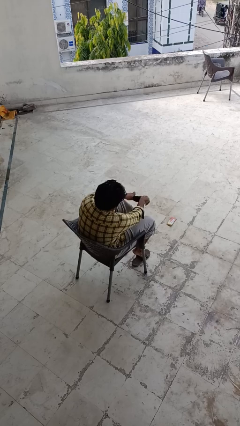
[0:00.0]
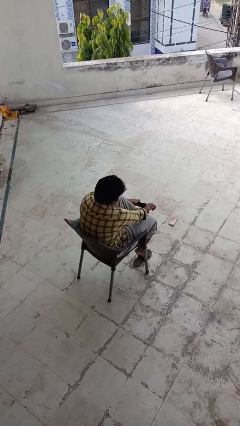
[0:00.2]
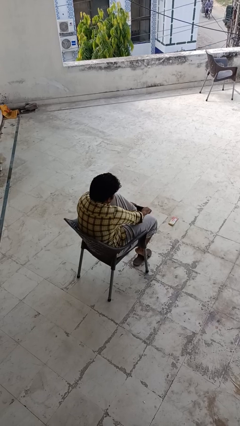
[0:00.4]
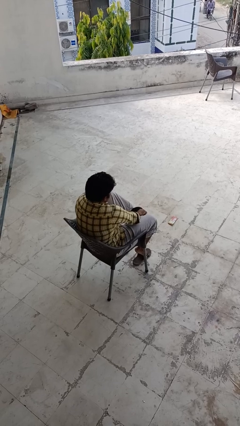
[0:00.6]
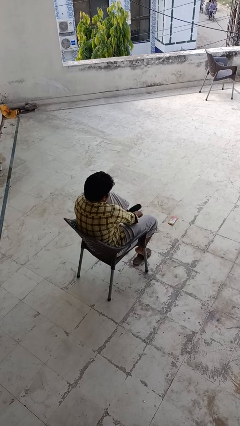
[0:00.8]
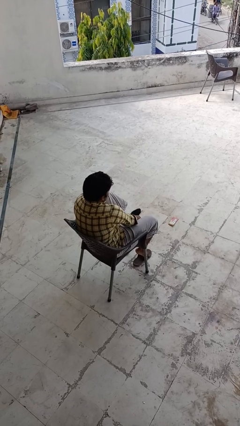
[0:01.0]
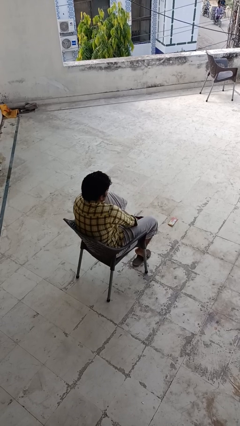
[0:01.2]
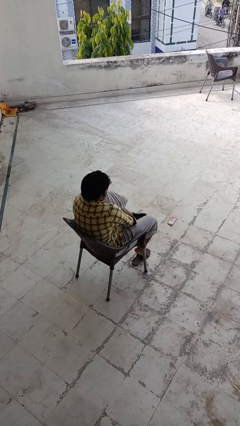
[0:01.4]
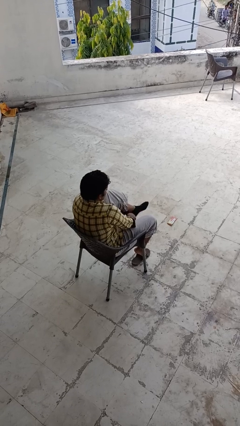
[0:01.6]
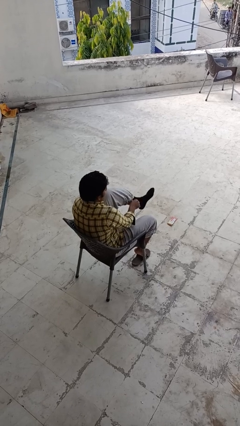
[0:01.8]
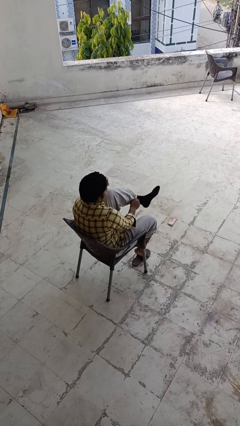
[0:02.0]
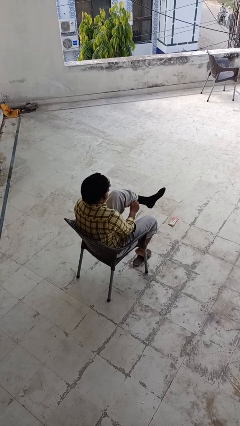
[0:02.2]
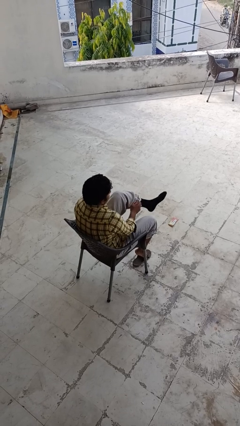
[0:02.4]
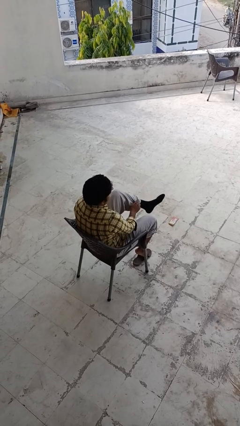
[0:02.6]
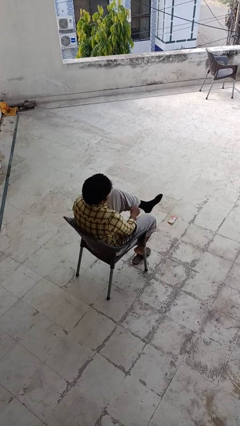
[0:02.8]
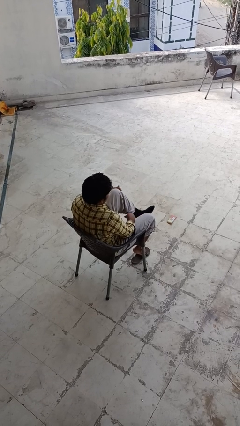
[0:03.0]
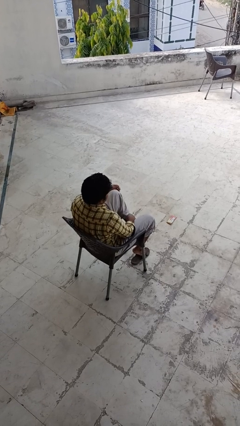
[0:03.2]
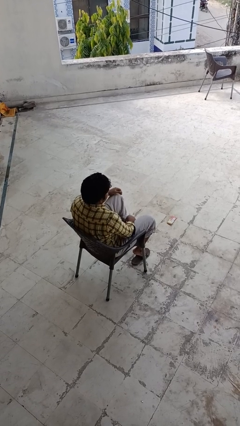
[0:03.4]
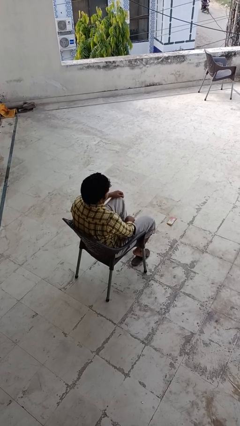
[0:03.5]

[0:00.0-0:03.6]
person puts on socks

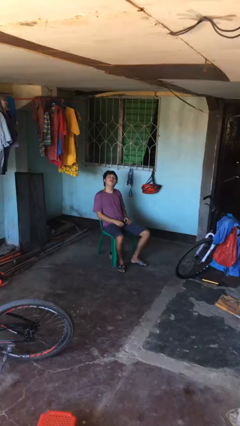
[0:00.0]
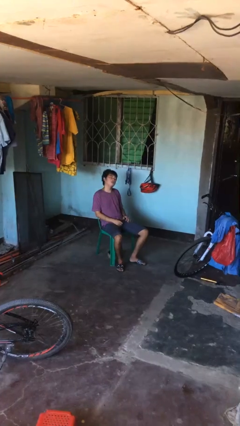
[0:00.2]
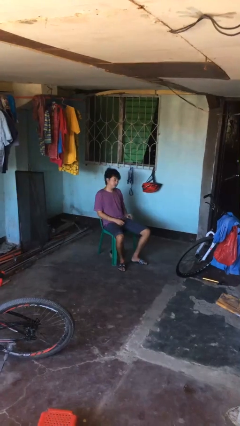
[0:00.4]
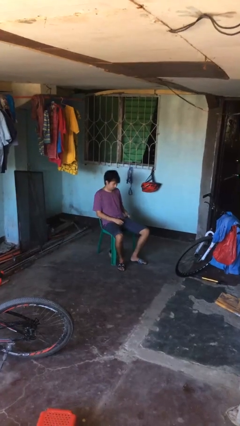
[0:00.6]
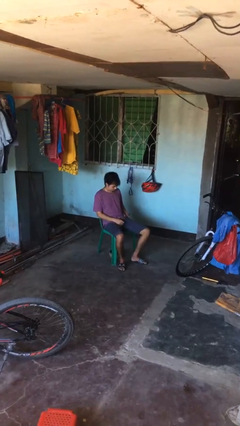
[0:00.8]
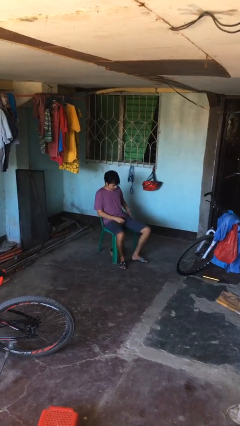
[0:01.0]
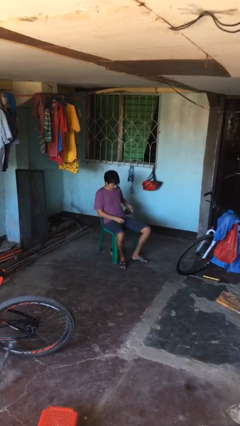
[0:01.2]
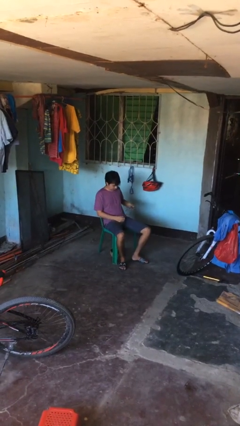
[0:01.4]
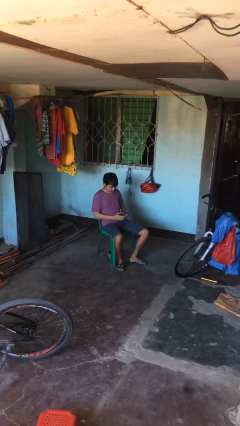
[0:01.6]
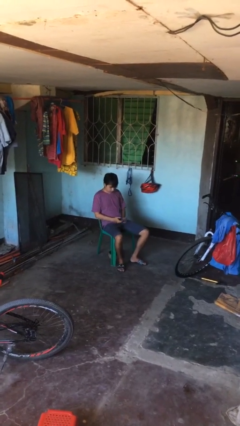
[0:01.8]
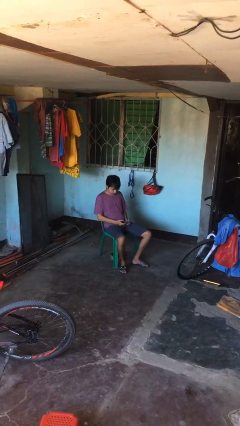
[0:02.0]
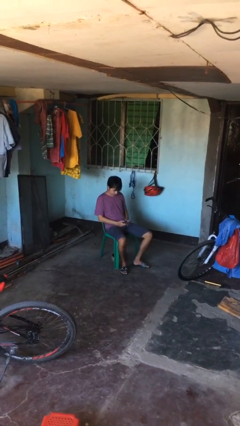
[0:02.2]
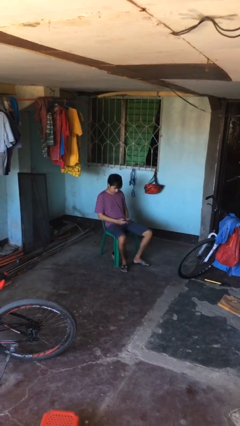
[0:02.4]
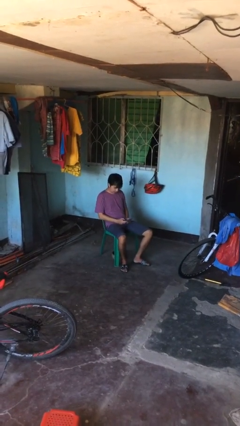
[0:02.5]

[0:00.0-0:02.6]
person takes phone from pocket

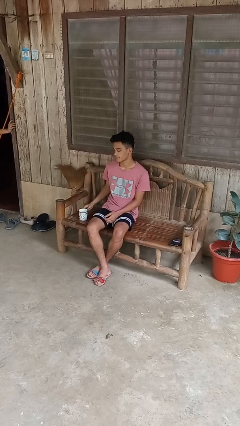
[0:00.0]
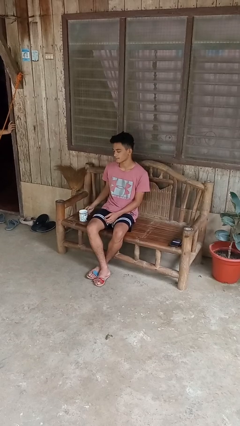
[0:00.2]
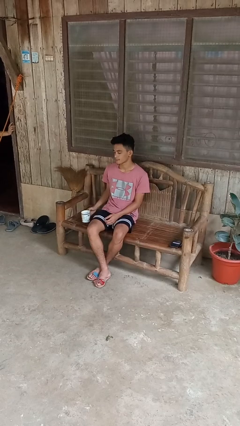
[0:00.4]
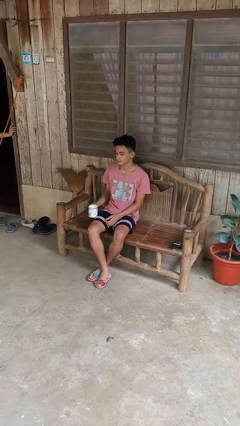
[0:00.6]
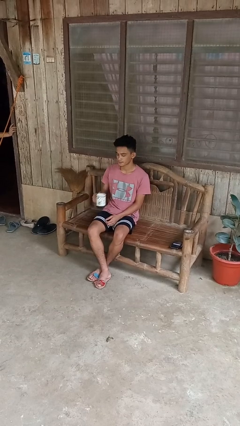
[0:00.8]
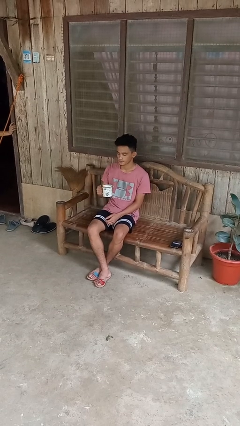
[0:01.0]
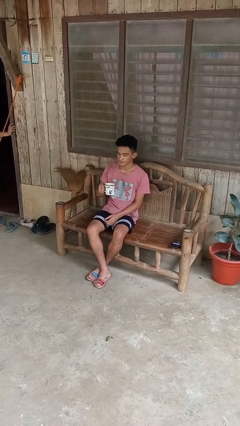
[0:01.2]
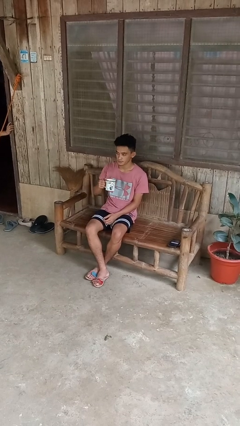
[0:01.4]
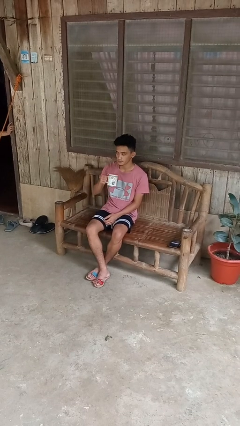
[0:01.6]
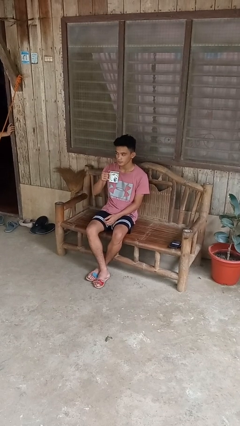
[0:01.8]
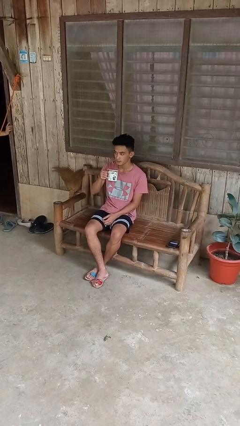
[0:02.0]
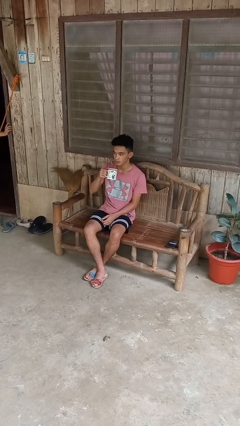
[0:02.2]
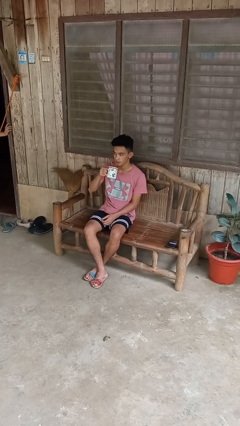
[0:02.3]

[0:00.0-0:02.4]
person picks up object from table

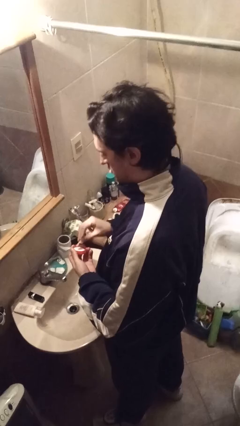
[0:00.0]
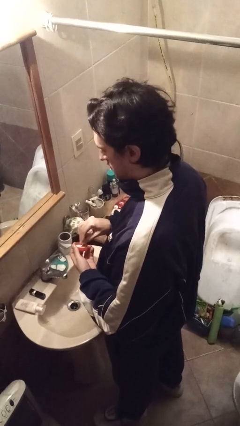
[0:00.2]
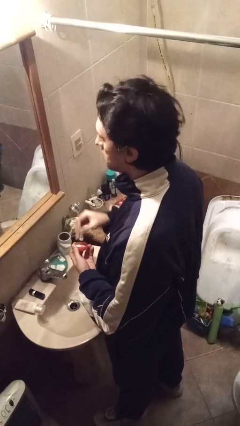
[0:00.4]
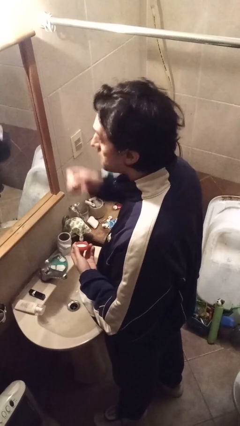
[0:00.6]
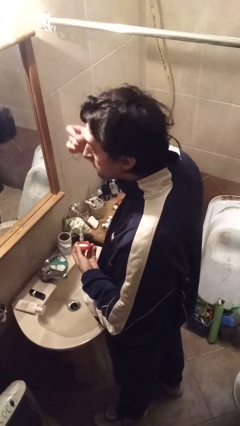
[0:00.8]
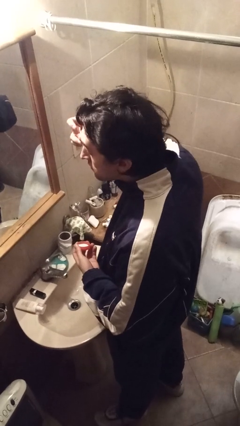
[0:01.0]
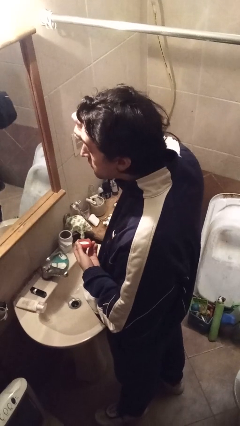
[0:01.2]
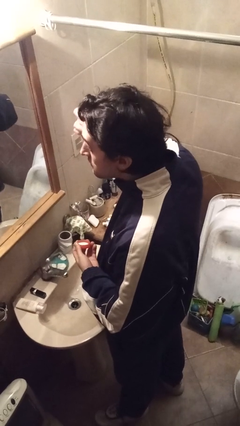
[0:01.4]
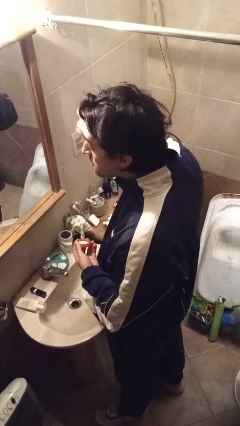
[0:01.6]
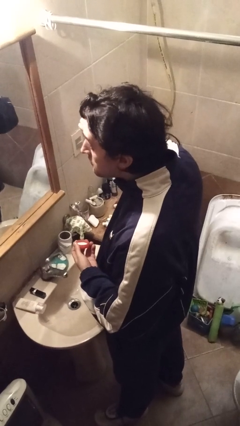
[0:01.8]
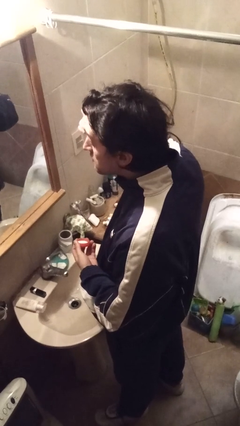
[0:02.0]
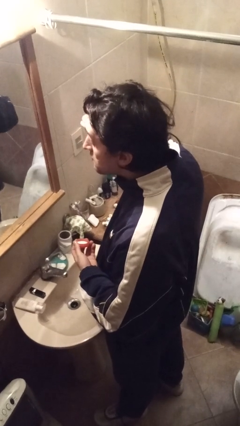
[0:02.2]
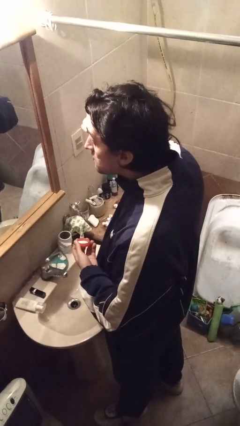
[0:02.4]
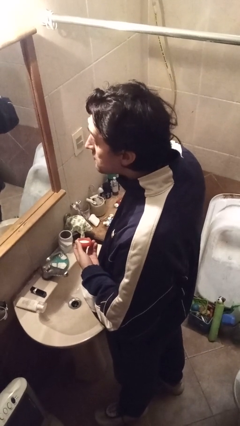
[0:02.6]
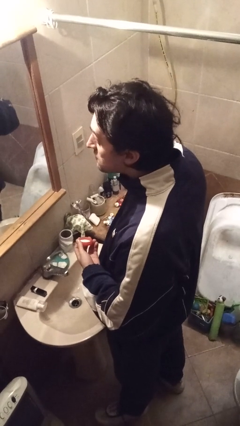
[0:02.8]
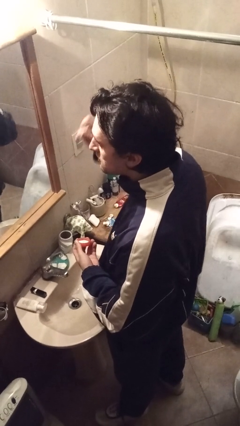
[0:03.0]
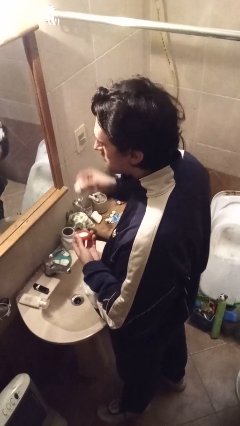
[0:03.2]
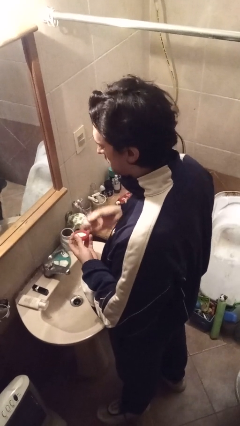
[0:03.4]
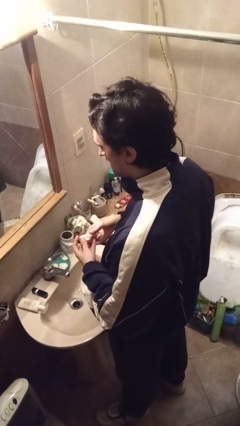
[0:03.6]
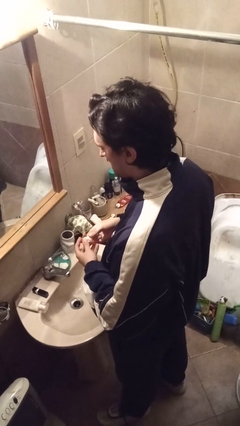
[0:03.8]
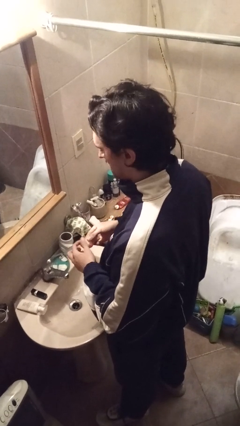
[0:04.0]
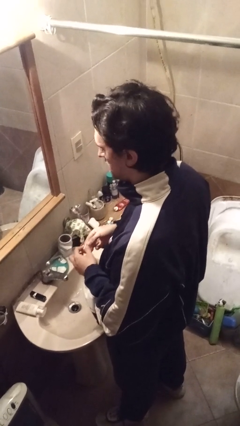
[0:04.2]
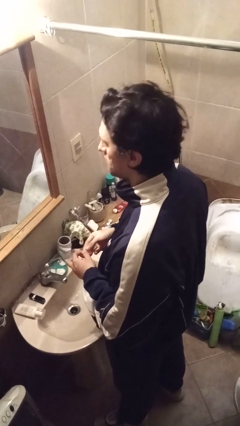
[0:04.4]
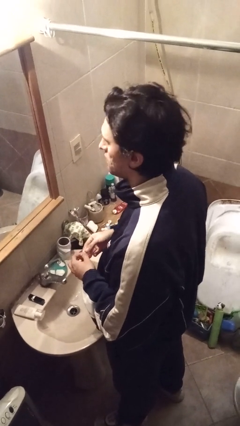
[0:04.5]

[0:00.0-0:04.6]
person applies eye makeup

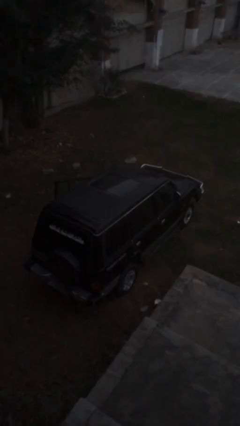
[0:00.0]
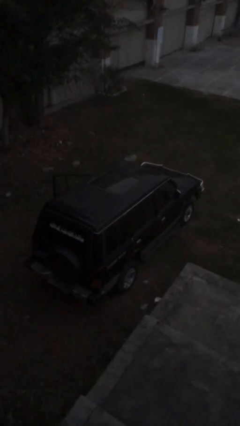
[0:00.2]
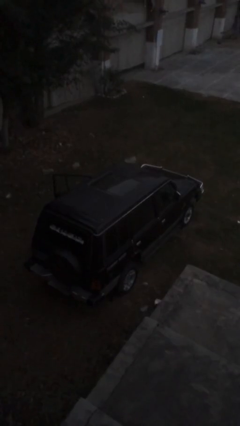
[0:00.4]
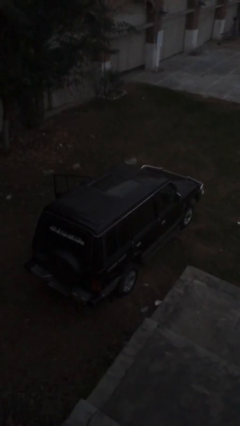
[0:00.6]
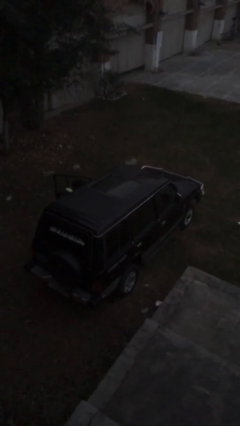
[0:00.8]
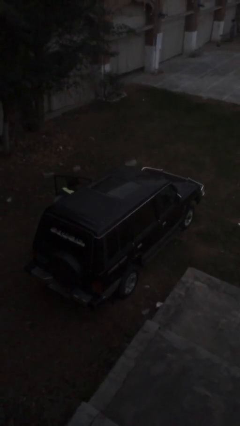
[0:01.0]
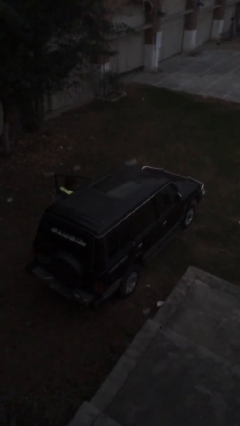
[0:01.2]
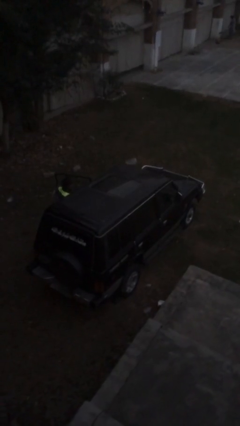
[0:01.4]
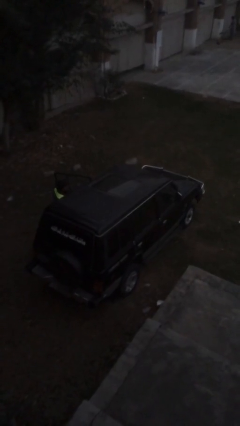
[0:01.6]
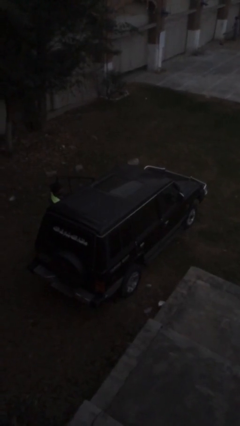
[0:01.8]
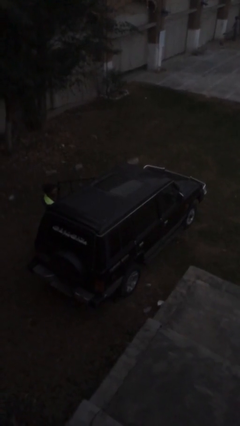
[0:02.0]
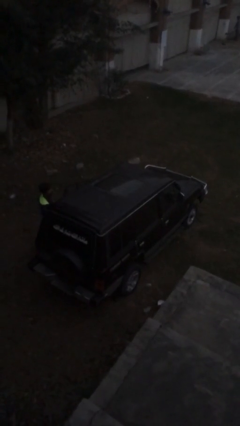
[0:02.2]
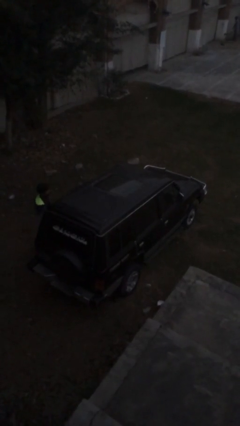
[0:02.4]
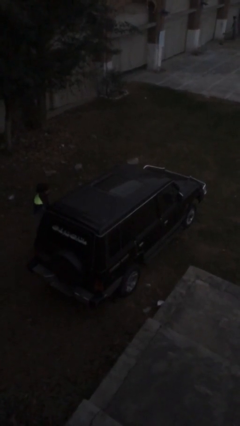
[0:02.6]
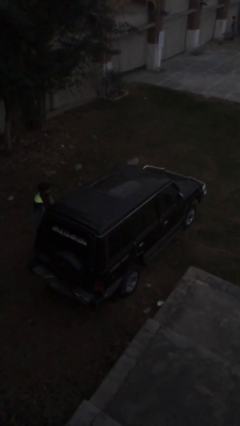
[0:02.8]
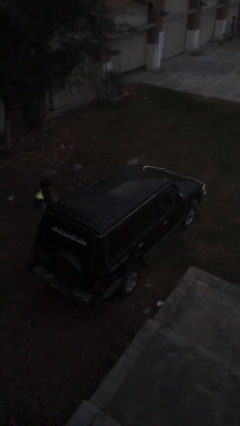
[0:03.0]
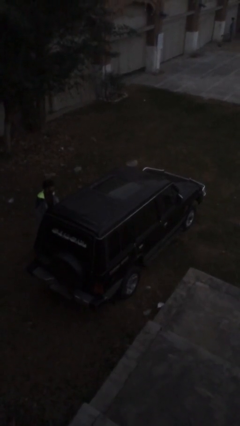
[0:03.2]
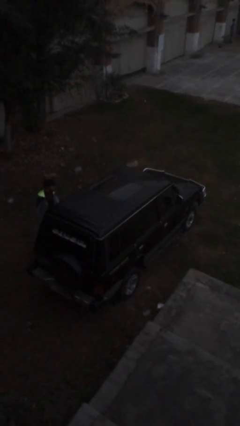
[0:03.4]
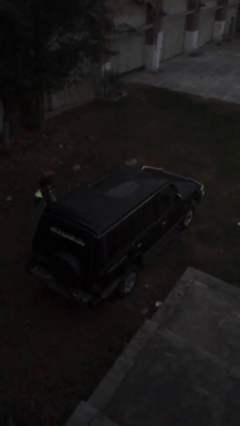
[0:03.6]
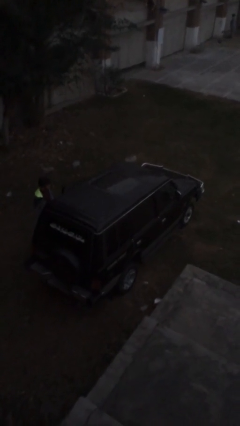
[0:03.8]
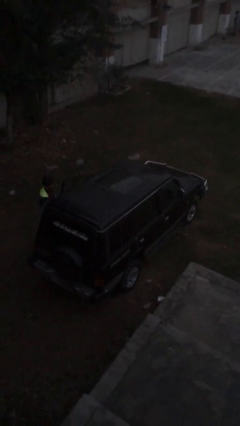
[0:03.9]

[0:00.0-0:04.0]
car drops off person
